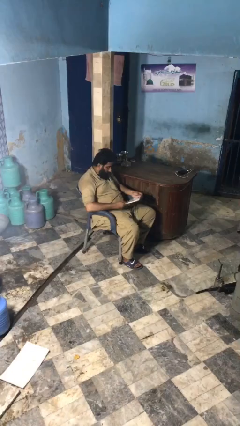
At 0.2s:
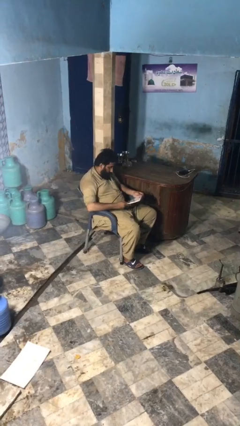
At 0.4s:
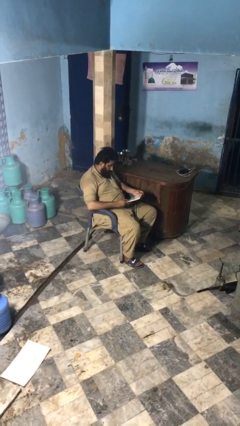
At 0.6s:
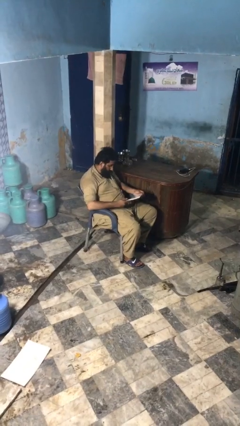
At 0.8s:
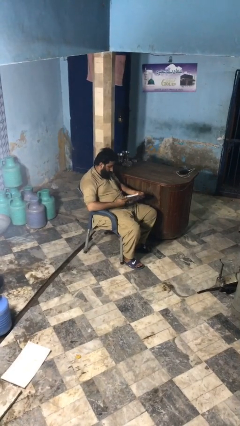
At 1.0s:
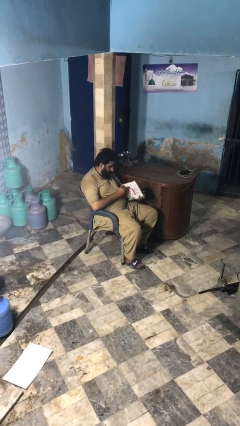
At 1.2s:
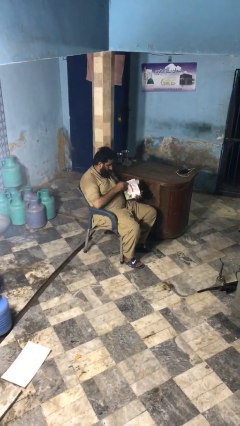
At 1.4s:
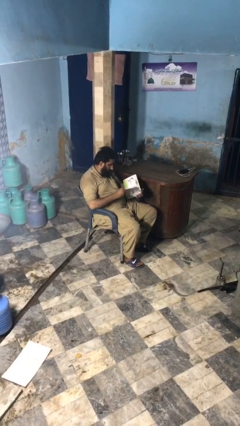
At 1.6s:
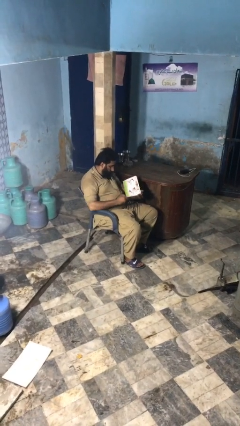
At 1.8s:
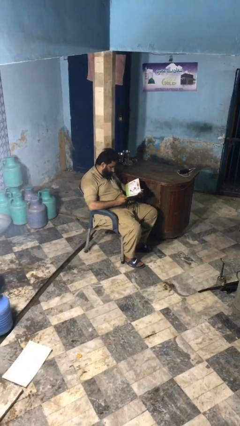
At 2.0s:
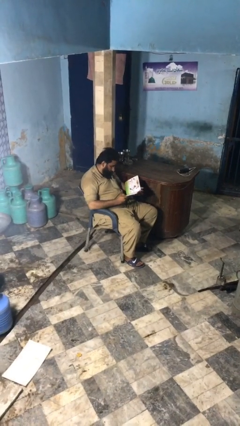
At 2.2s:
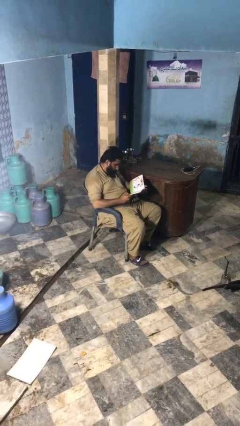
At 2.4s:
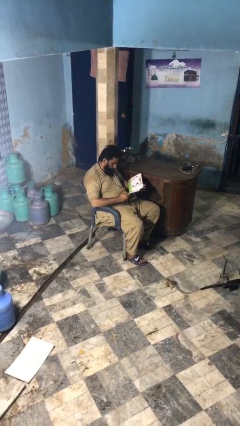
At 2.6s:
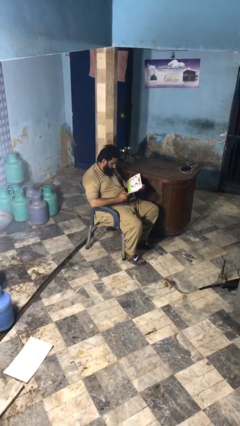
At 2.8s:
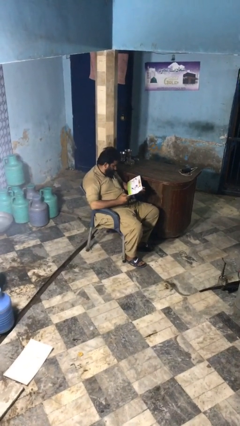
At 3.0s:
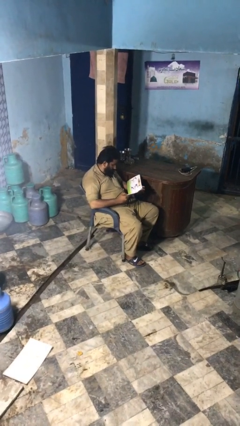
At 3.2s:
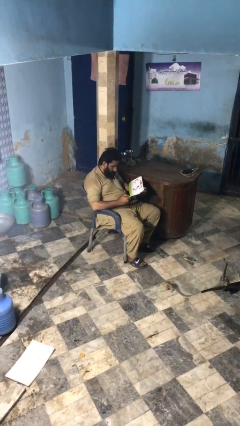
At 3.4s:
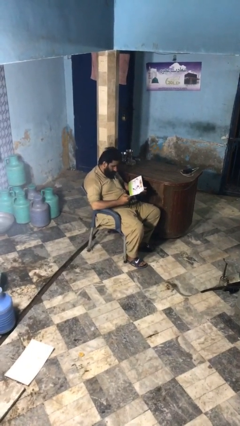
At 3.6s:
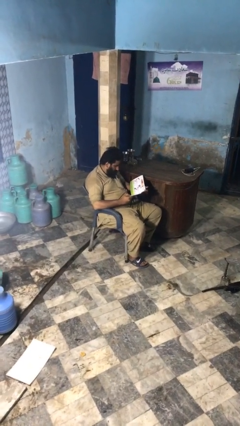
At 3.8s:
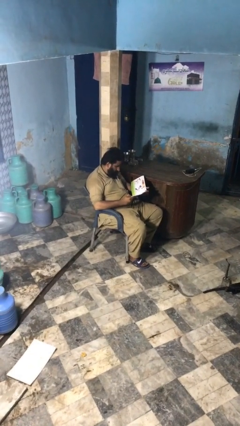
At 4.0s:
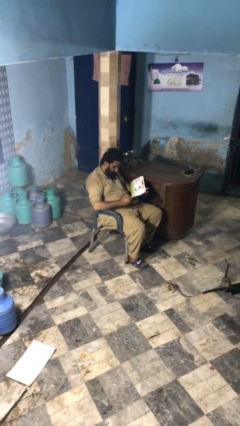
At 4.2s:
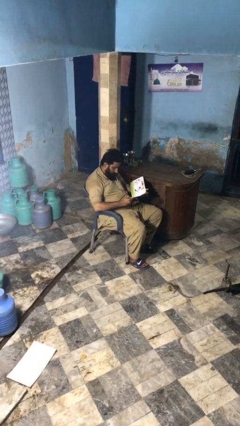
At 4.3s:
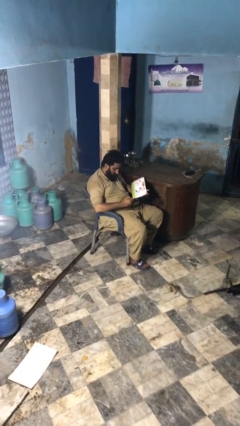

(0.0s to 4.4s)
person reads document

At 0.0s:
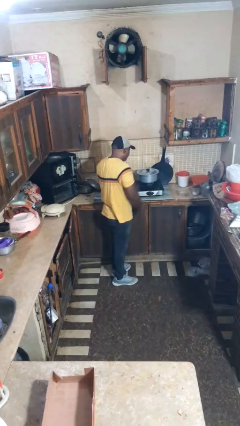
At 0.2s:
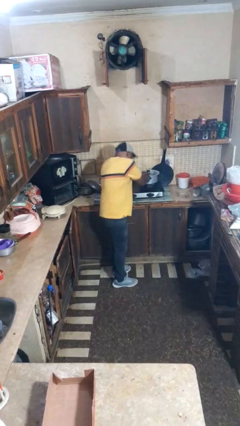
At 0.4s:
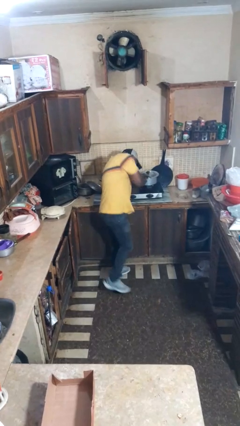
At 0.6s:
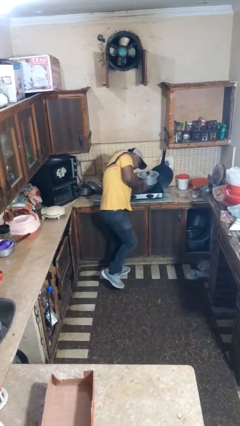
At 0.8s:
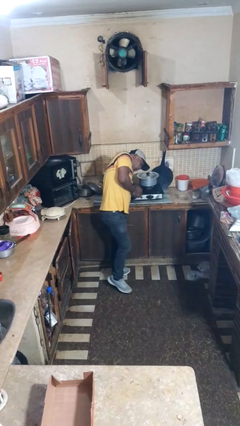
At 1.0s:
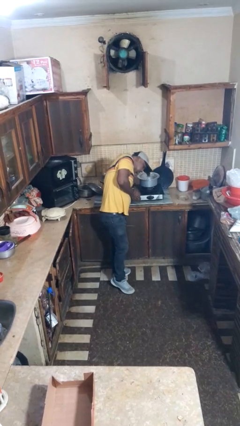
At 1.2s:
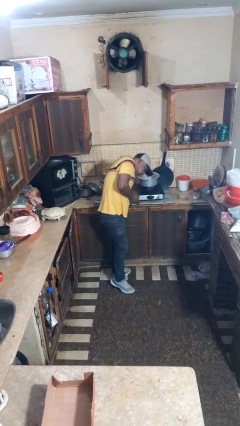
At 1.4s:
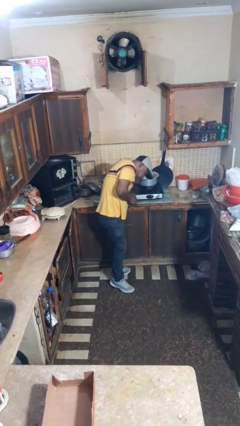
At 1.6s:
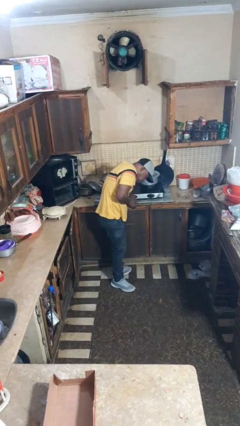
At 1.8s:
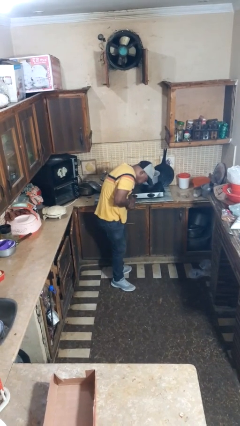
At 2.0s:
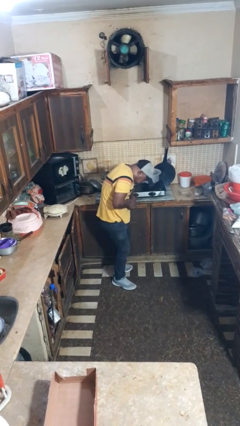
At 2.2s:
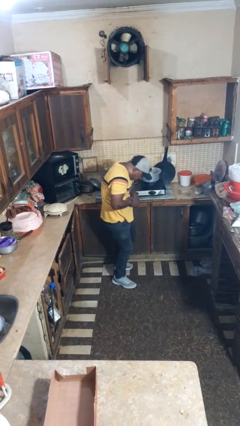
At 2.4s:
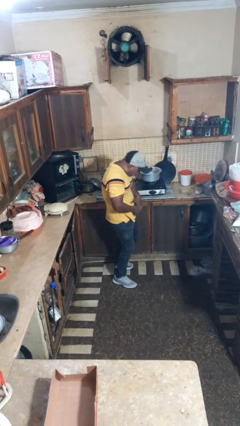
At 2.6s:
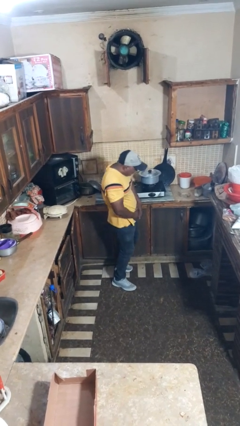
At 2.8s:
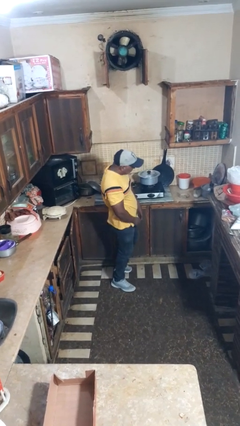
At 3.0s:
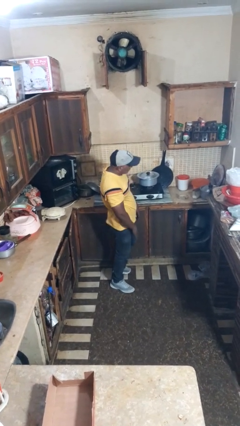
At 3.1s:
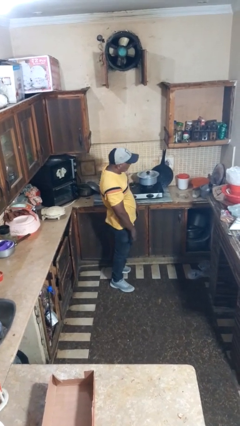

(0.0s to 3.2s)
person burns hand

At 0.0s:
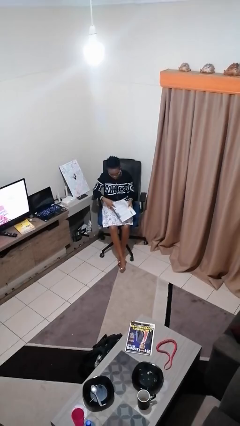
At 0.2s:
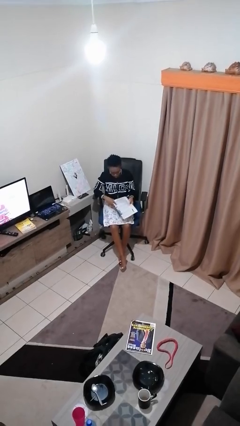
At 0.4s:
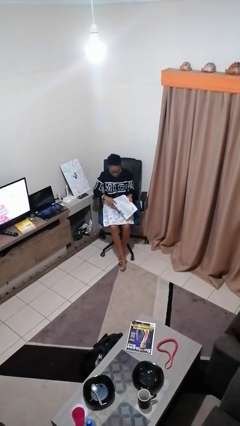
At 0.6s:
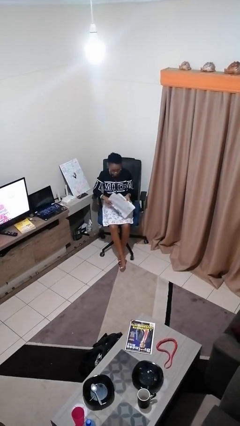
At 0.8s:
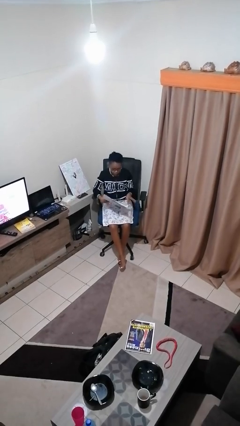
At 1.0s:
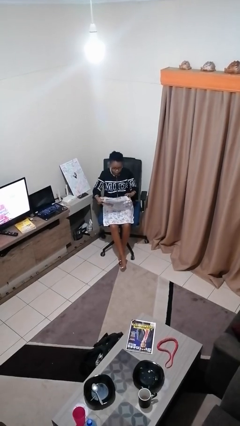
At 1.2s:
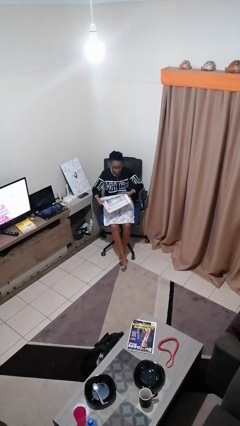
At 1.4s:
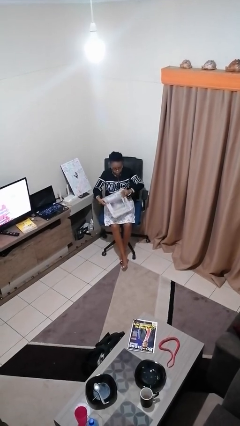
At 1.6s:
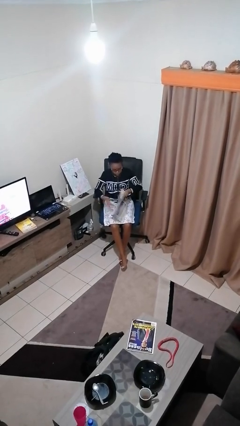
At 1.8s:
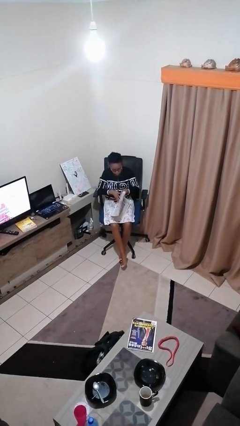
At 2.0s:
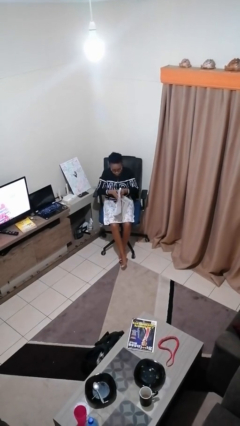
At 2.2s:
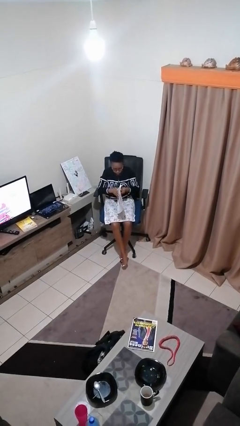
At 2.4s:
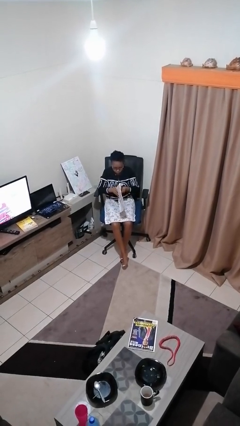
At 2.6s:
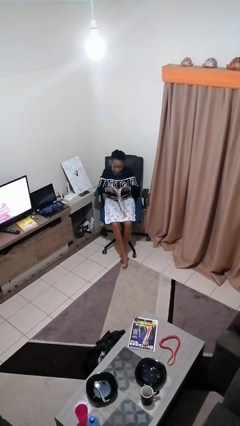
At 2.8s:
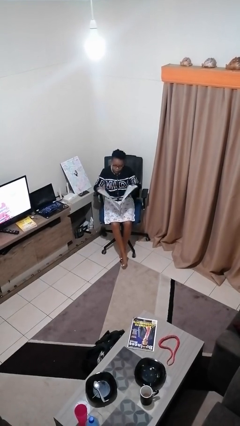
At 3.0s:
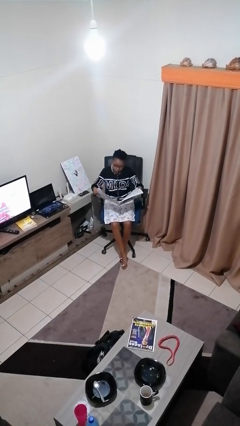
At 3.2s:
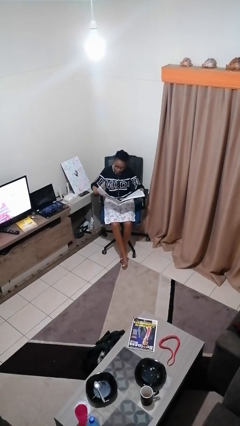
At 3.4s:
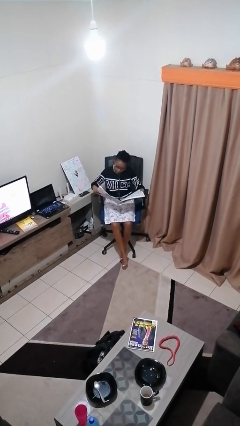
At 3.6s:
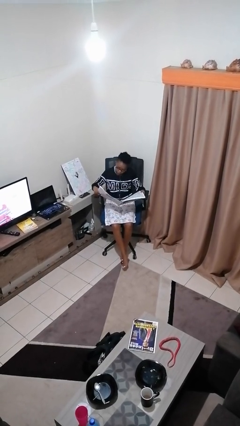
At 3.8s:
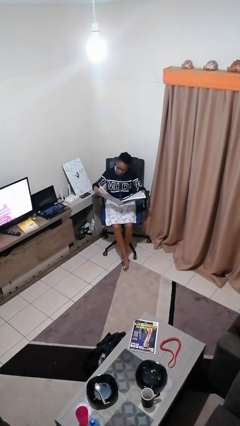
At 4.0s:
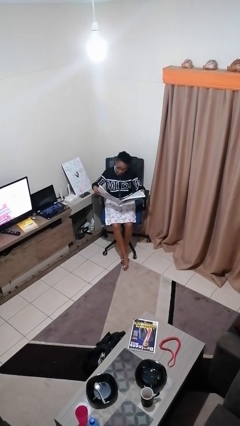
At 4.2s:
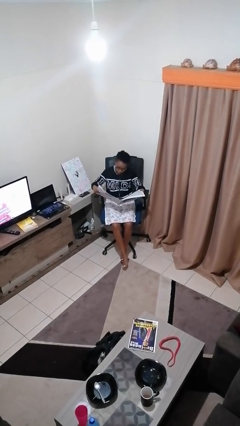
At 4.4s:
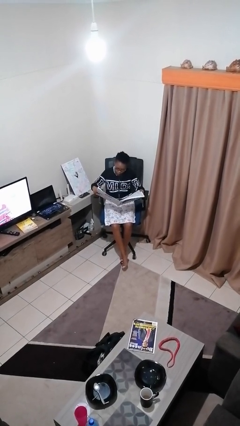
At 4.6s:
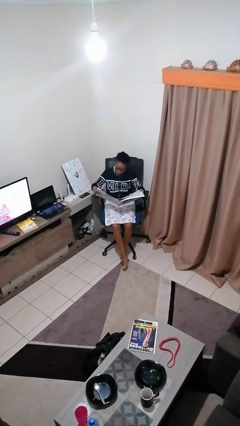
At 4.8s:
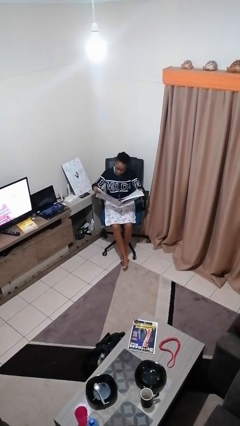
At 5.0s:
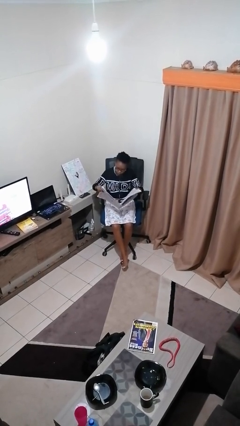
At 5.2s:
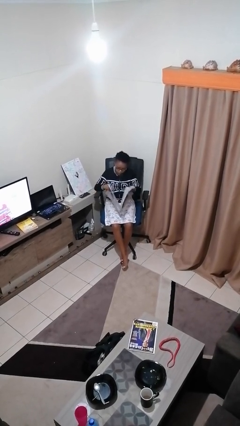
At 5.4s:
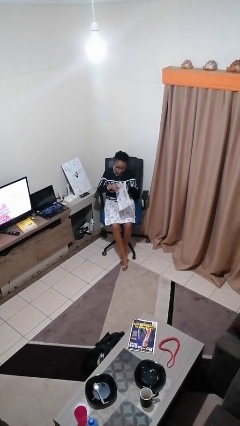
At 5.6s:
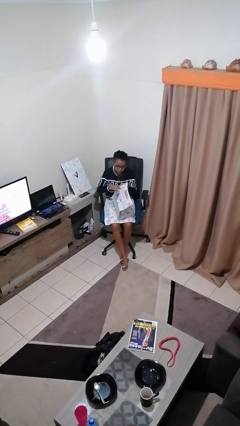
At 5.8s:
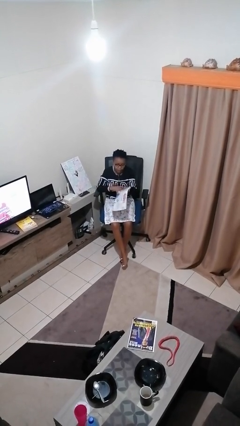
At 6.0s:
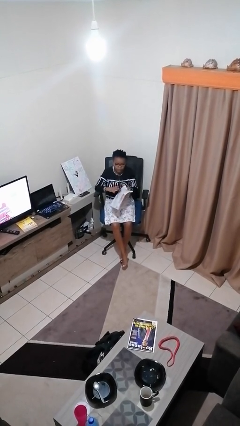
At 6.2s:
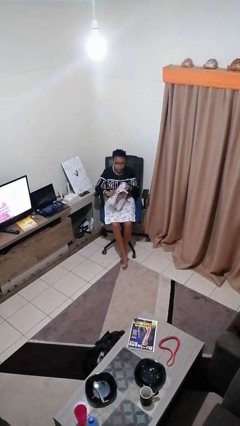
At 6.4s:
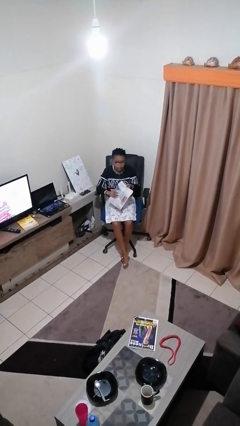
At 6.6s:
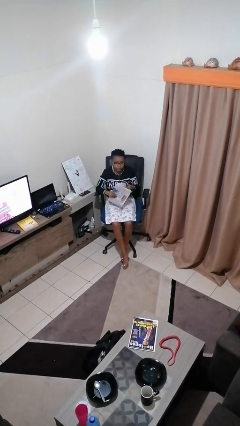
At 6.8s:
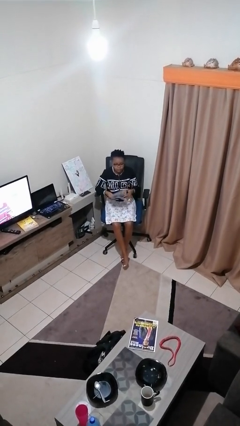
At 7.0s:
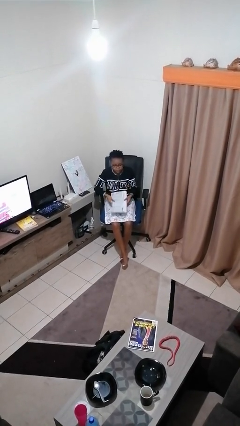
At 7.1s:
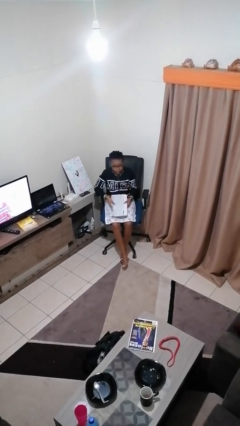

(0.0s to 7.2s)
person reads newspaper

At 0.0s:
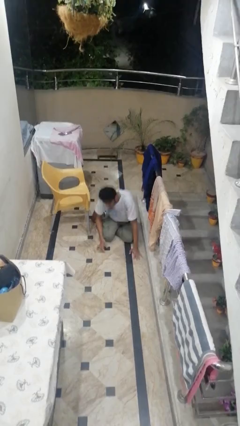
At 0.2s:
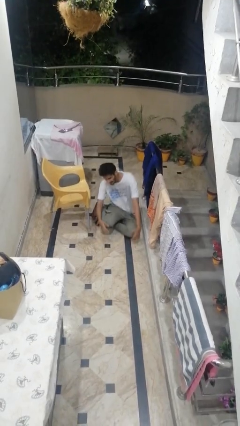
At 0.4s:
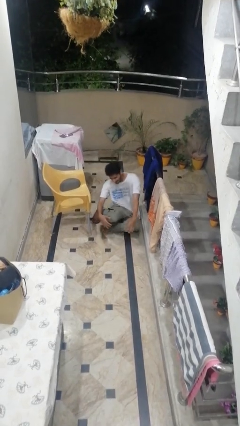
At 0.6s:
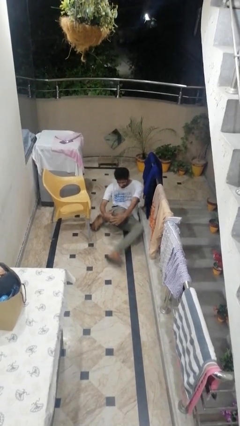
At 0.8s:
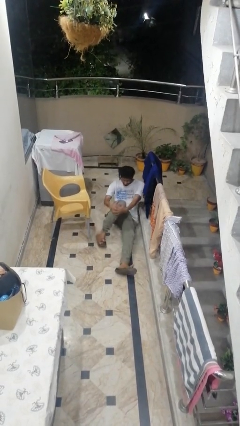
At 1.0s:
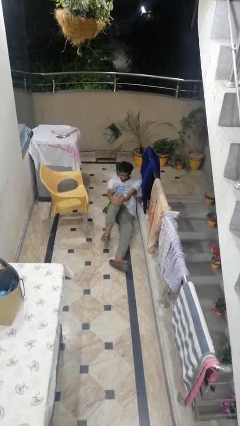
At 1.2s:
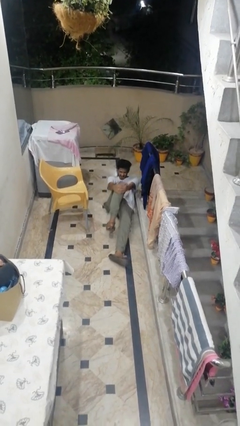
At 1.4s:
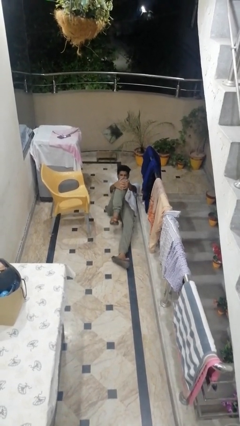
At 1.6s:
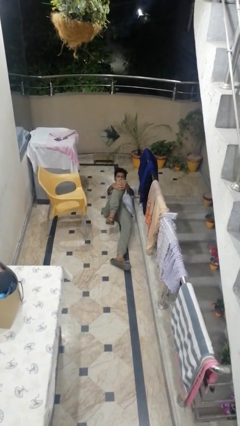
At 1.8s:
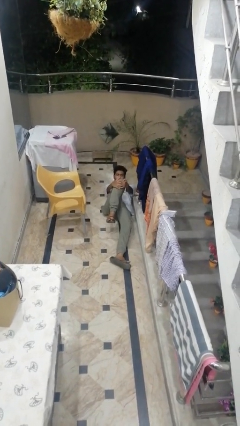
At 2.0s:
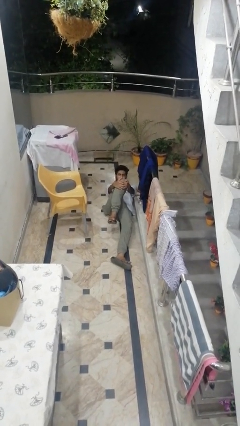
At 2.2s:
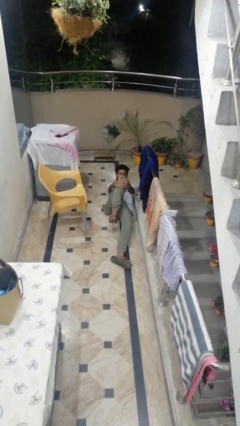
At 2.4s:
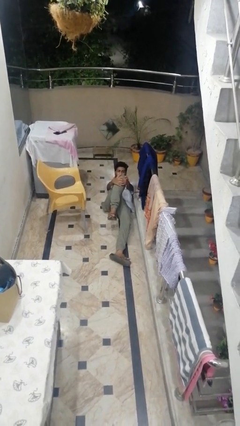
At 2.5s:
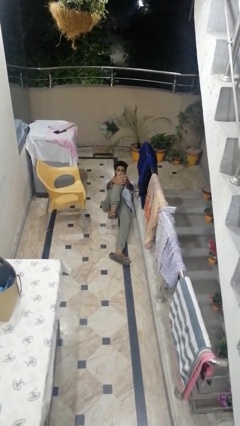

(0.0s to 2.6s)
person lies down on floor

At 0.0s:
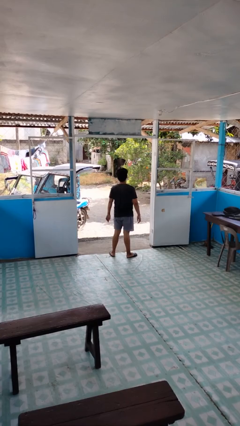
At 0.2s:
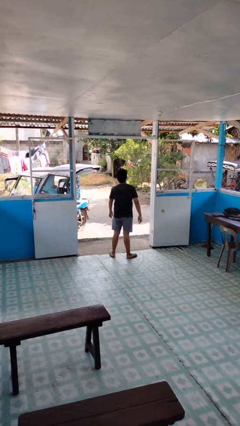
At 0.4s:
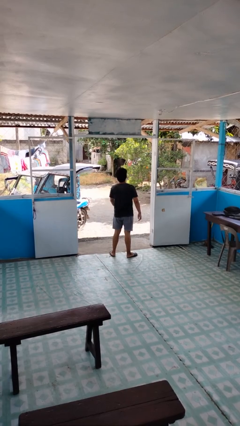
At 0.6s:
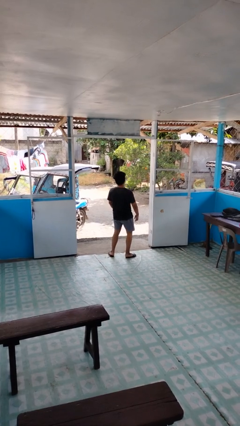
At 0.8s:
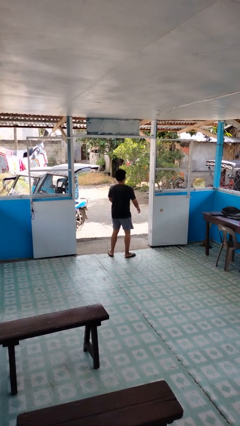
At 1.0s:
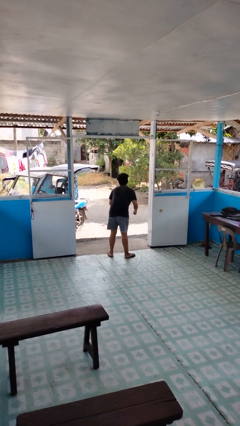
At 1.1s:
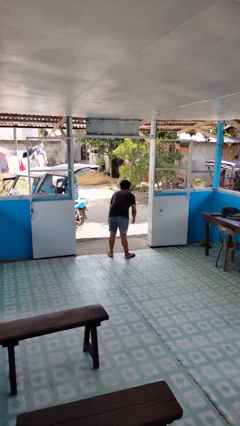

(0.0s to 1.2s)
person wiggles hips
